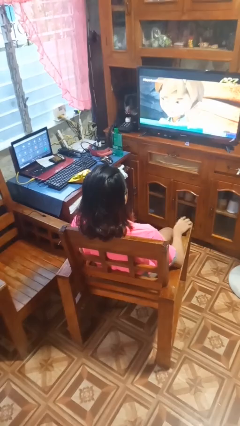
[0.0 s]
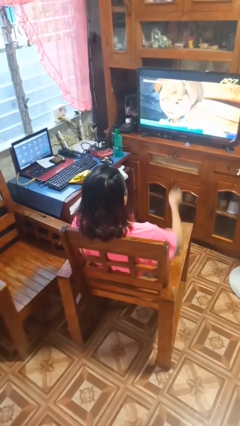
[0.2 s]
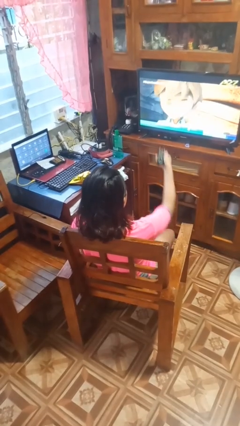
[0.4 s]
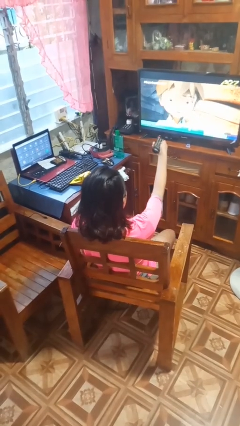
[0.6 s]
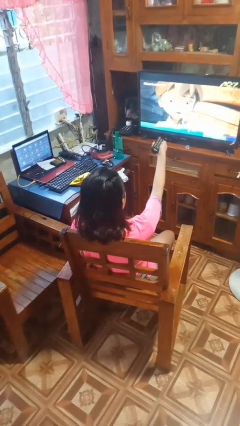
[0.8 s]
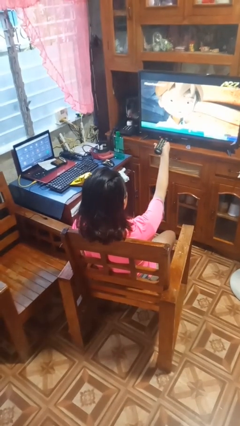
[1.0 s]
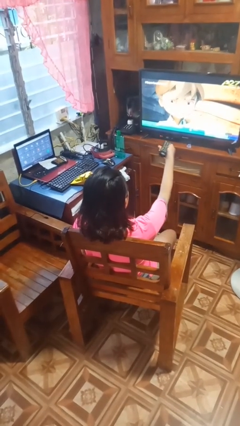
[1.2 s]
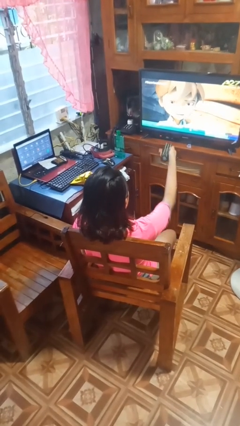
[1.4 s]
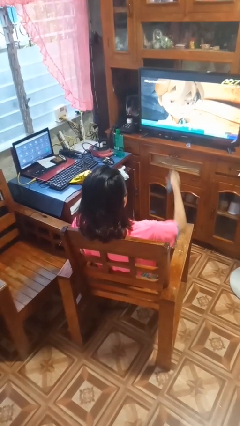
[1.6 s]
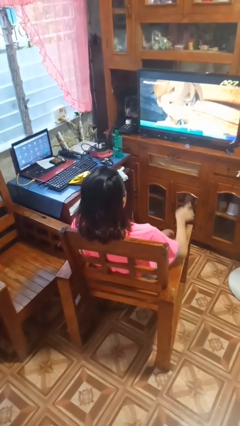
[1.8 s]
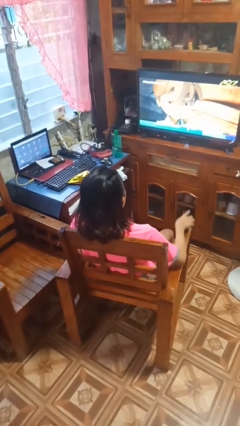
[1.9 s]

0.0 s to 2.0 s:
person uses television remote

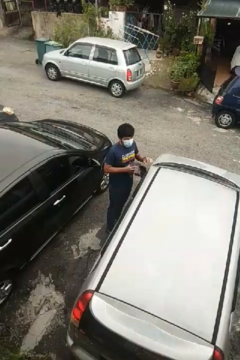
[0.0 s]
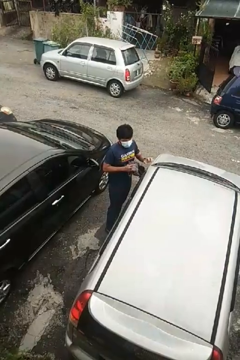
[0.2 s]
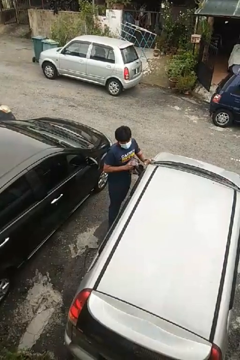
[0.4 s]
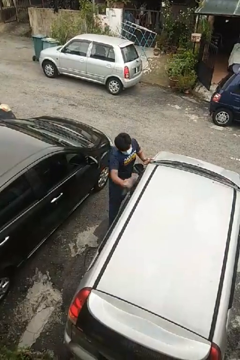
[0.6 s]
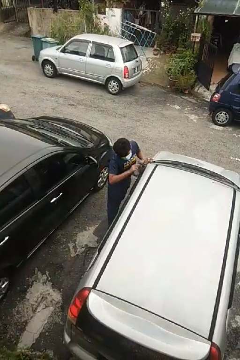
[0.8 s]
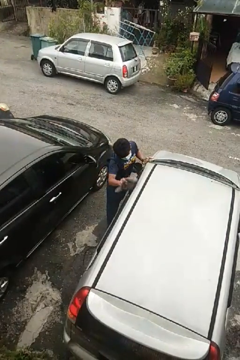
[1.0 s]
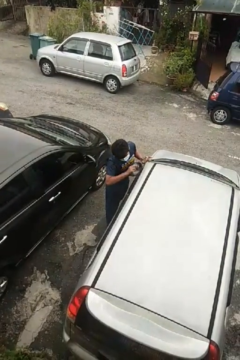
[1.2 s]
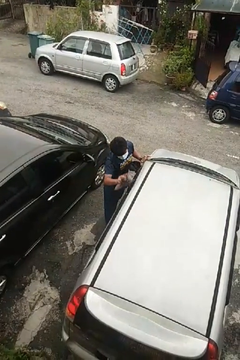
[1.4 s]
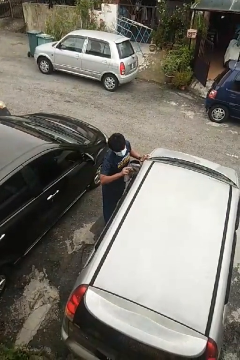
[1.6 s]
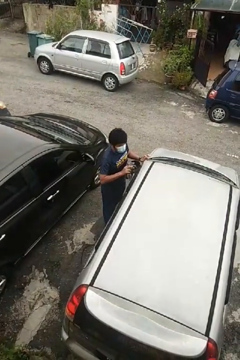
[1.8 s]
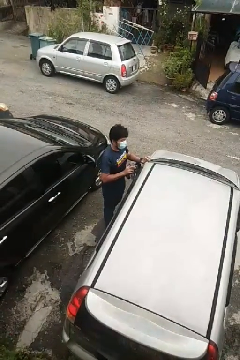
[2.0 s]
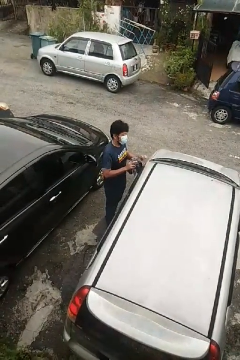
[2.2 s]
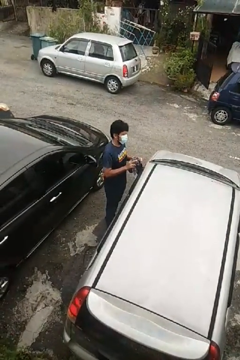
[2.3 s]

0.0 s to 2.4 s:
person polishes car with rag

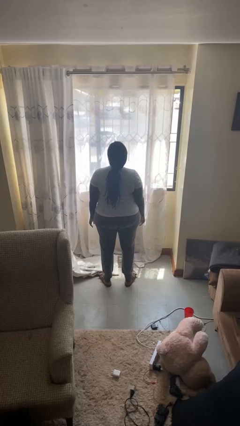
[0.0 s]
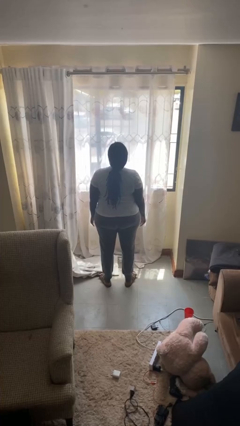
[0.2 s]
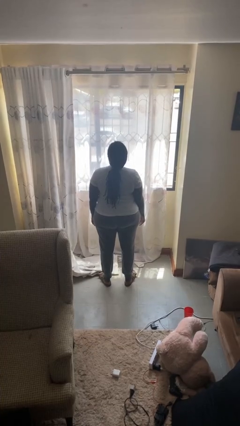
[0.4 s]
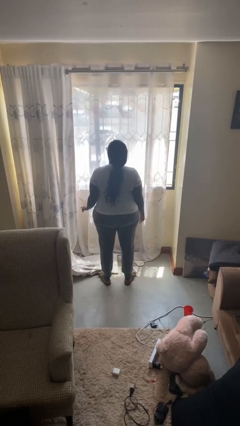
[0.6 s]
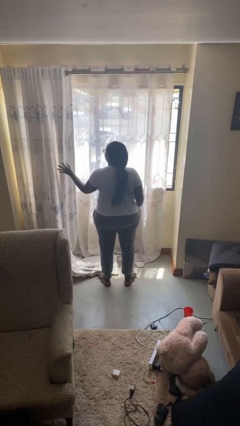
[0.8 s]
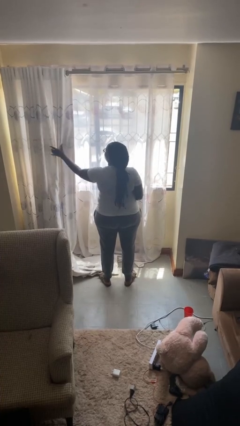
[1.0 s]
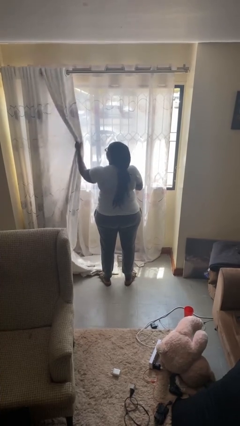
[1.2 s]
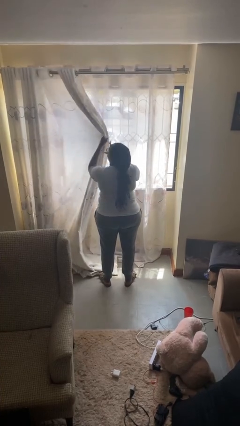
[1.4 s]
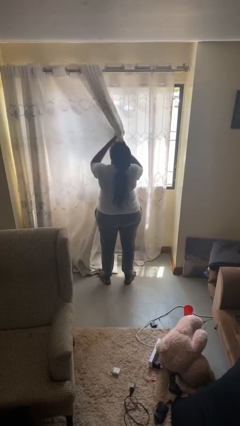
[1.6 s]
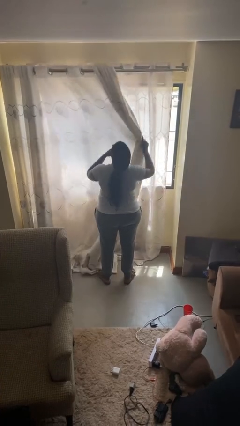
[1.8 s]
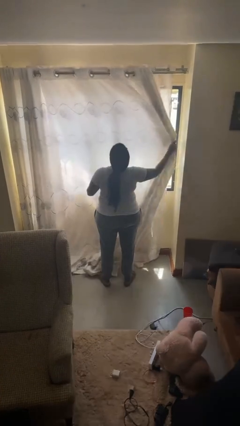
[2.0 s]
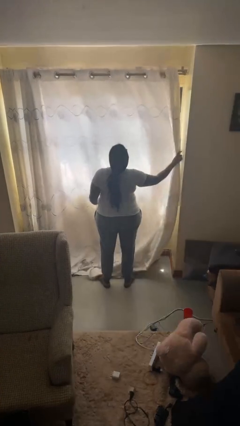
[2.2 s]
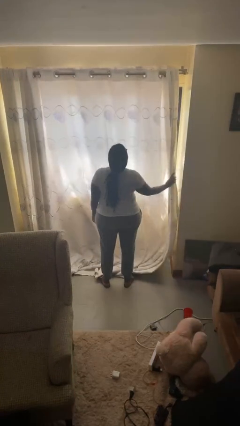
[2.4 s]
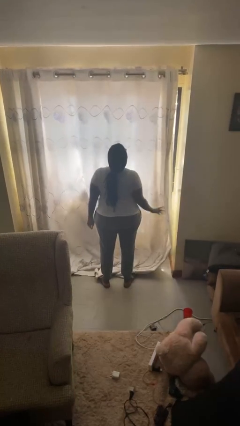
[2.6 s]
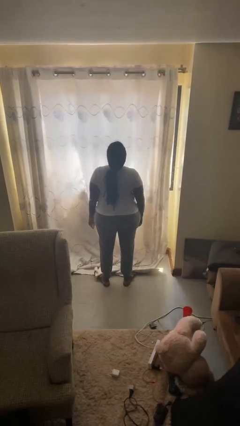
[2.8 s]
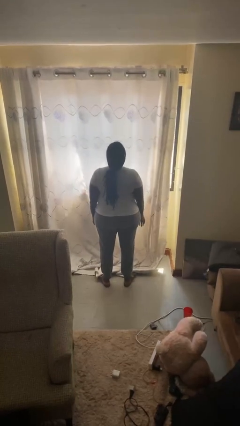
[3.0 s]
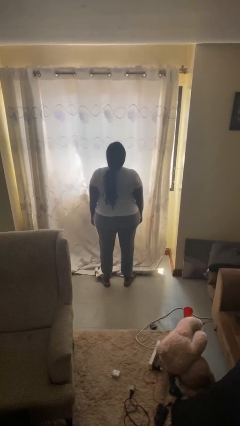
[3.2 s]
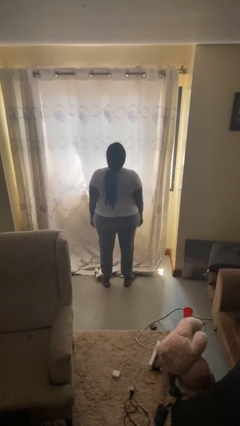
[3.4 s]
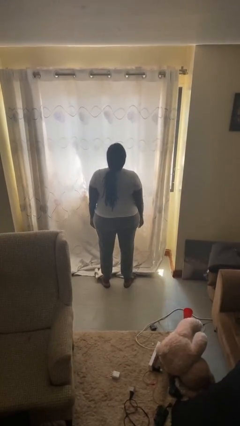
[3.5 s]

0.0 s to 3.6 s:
person closes curtains

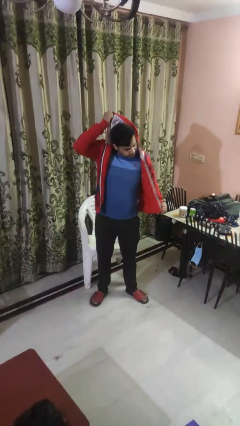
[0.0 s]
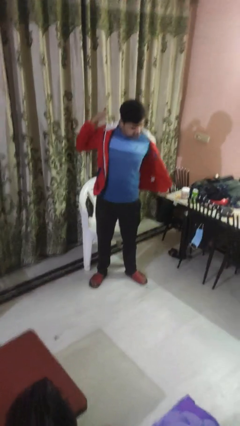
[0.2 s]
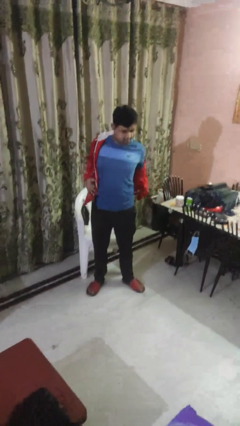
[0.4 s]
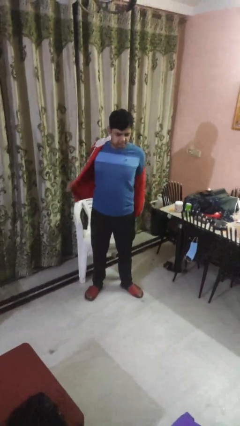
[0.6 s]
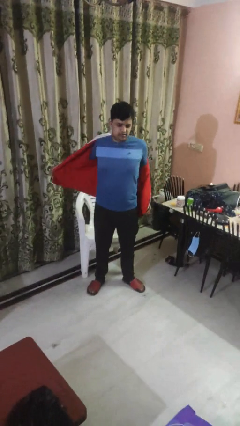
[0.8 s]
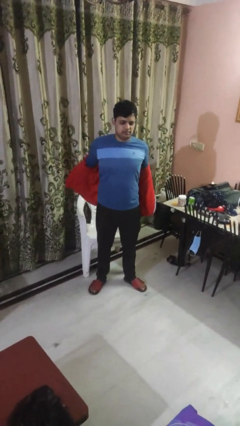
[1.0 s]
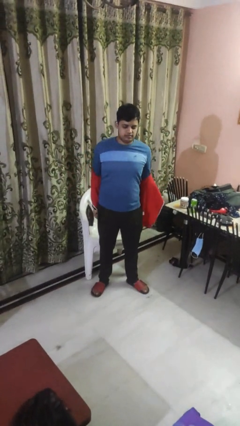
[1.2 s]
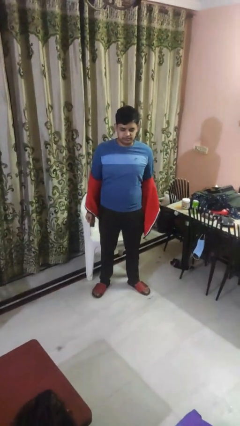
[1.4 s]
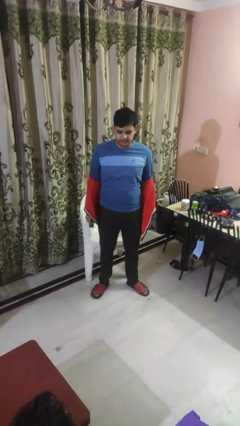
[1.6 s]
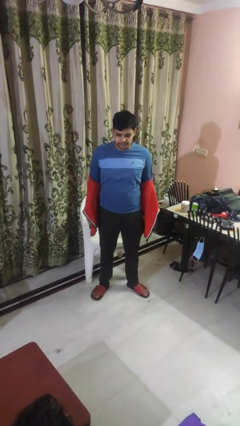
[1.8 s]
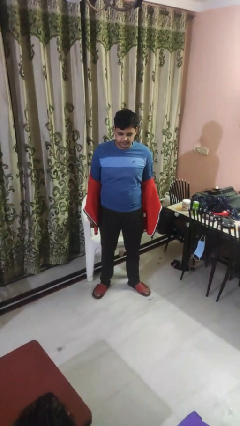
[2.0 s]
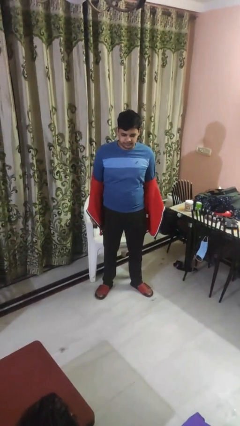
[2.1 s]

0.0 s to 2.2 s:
person takes off hoodie

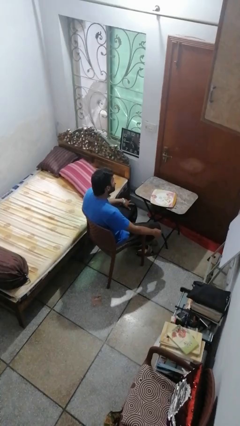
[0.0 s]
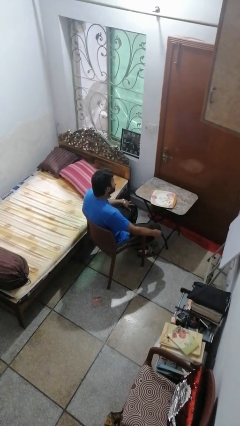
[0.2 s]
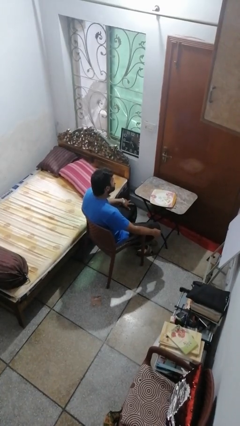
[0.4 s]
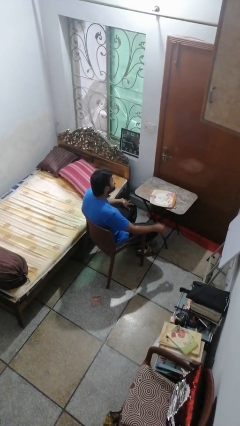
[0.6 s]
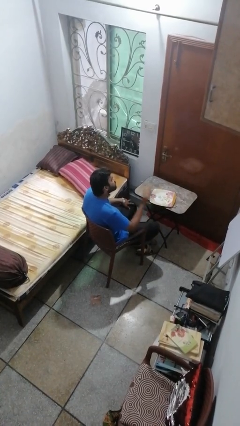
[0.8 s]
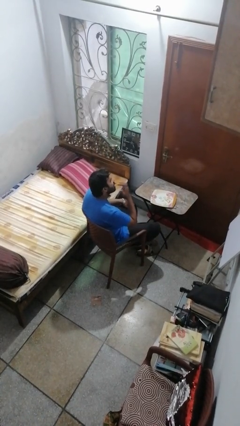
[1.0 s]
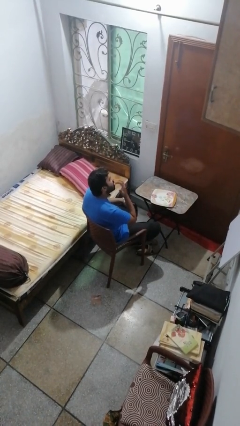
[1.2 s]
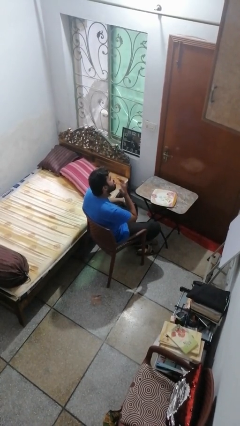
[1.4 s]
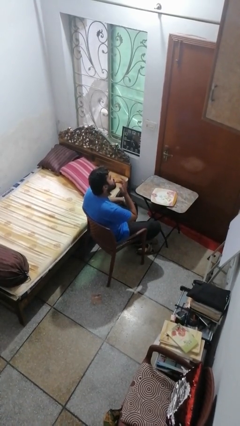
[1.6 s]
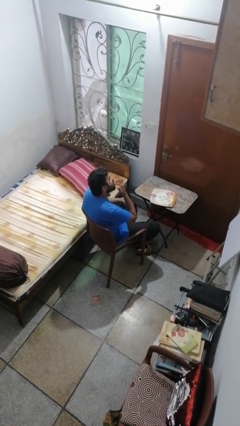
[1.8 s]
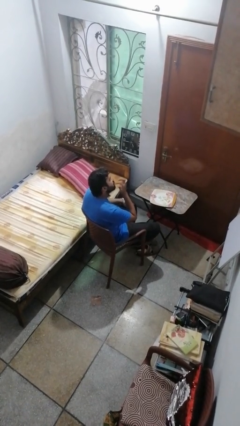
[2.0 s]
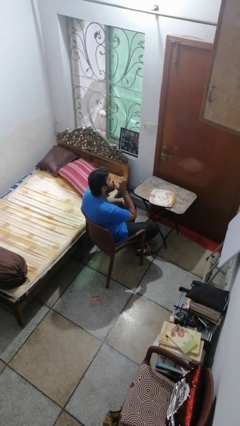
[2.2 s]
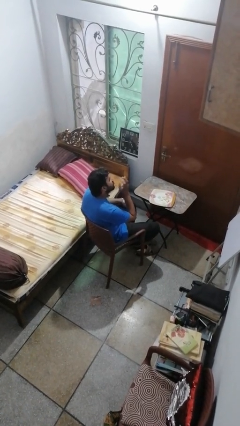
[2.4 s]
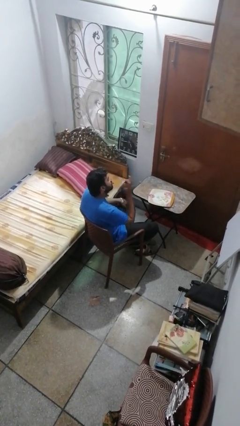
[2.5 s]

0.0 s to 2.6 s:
person licks fingers

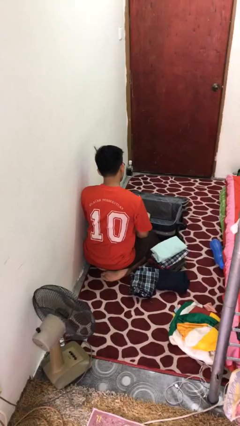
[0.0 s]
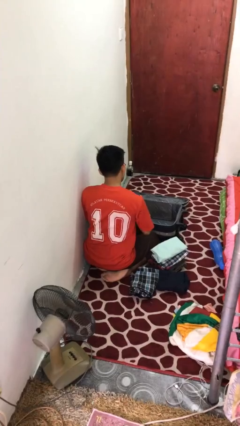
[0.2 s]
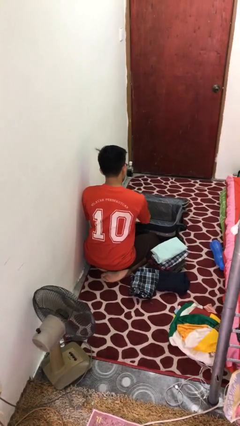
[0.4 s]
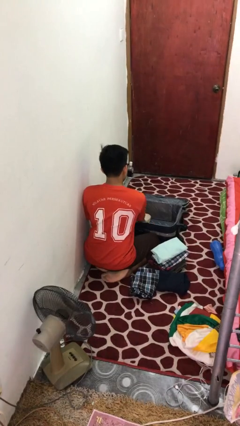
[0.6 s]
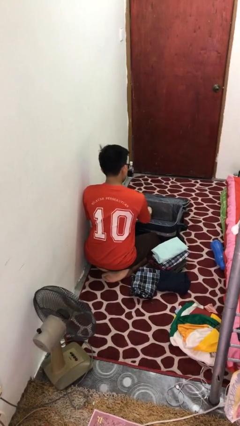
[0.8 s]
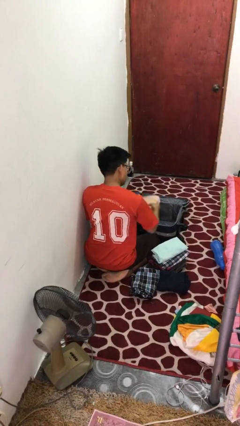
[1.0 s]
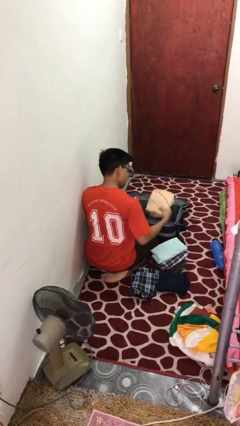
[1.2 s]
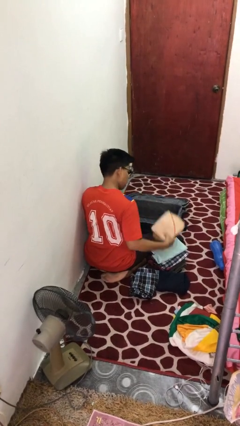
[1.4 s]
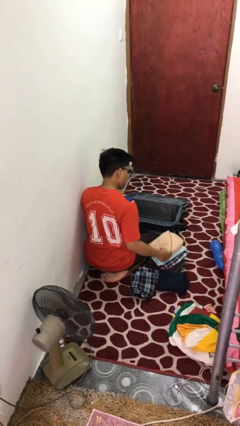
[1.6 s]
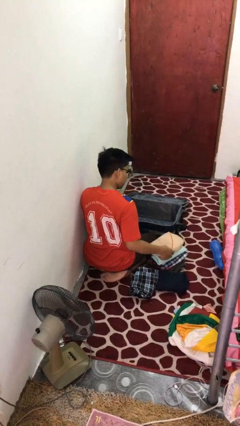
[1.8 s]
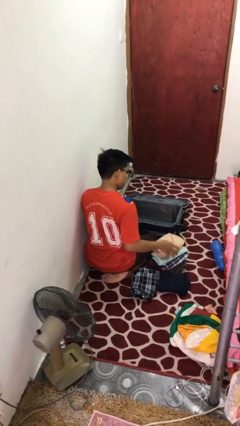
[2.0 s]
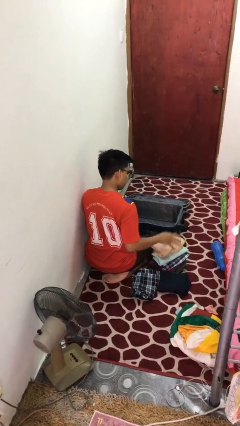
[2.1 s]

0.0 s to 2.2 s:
person unloads clothes from suitcase

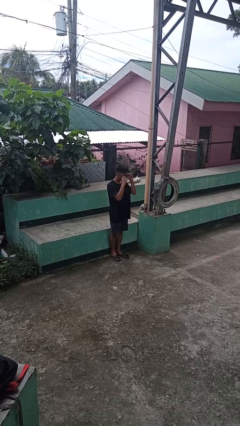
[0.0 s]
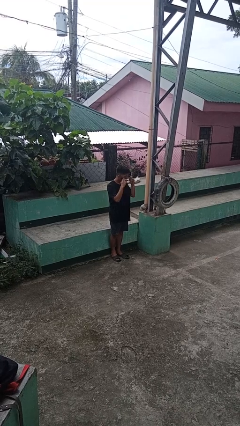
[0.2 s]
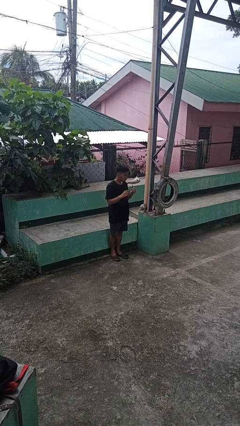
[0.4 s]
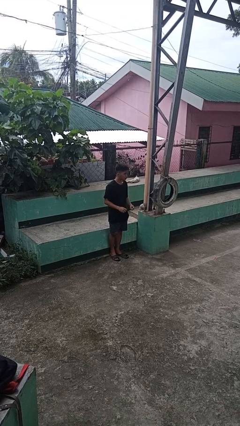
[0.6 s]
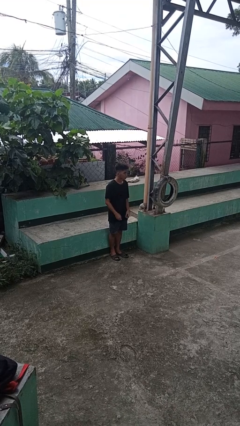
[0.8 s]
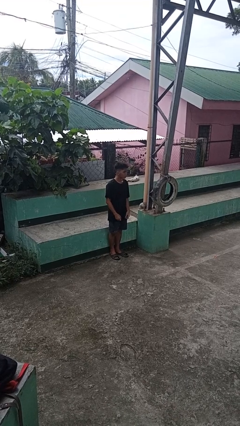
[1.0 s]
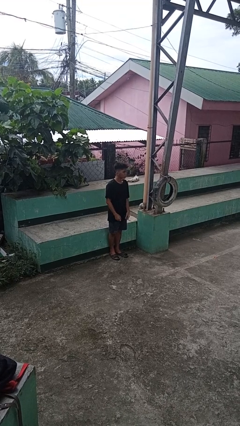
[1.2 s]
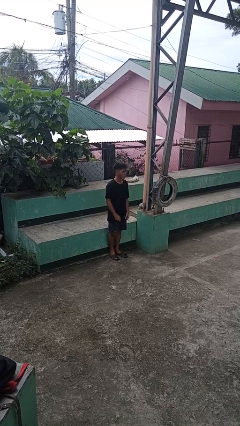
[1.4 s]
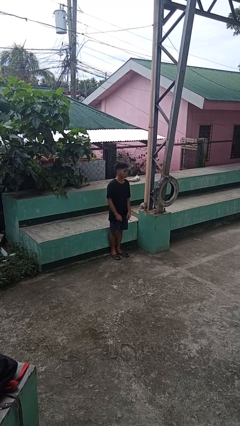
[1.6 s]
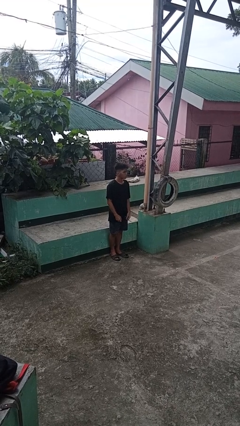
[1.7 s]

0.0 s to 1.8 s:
person takes off sunglasses

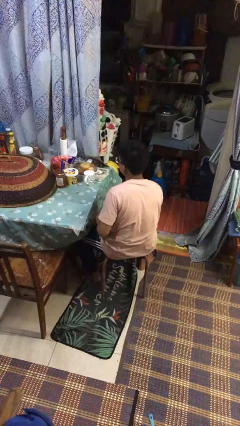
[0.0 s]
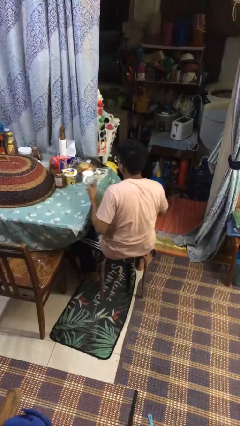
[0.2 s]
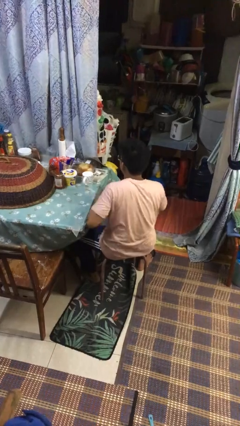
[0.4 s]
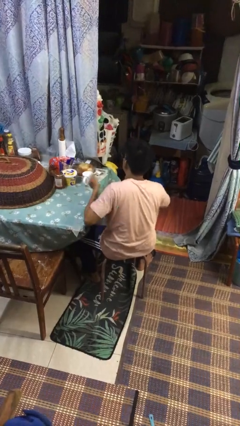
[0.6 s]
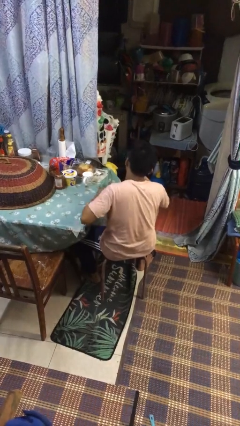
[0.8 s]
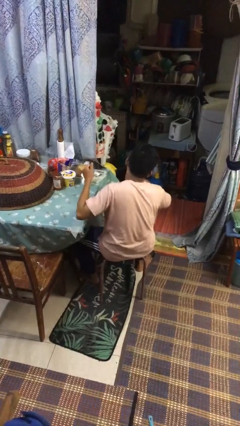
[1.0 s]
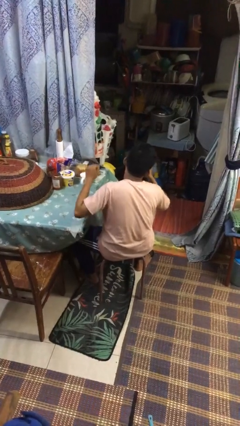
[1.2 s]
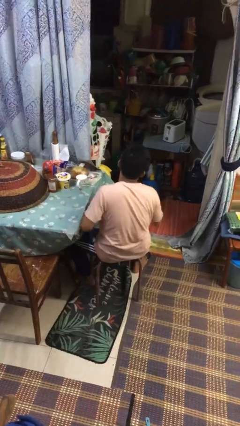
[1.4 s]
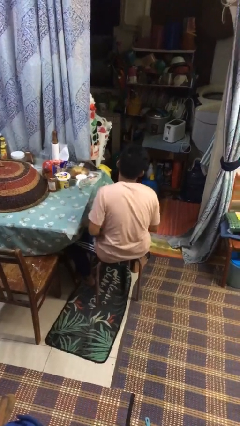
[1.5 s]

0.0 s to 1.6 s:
person drums on chest
